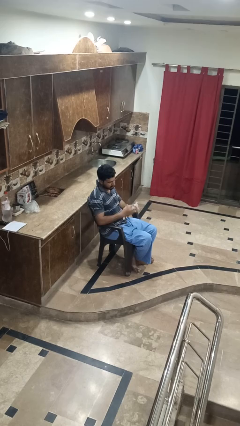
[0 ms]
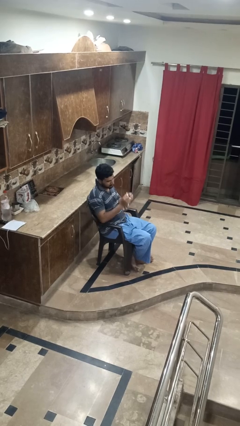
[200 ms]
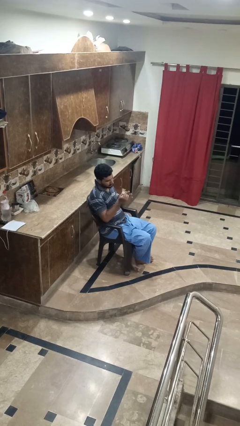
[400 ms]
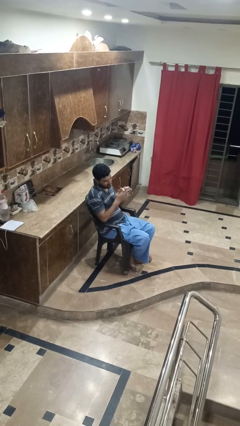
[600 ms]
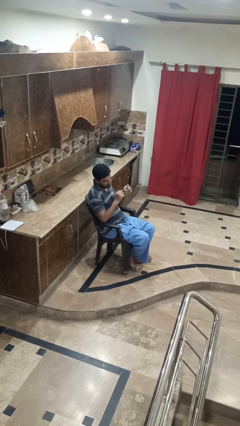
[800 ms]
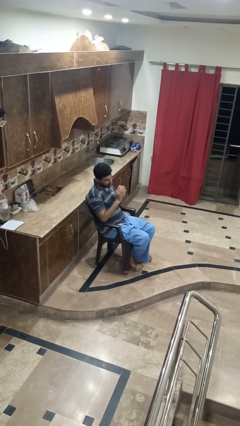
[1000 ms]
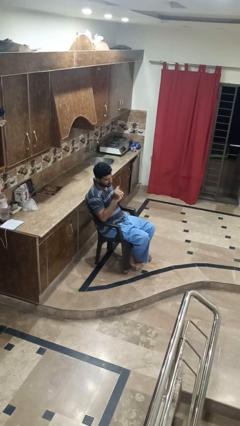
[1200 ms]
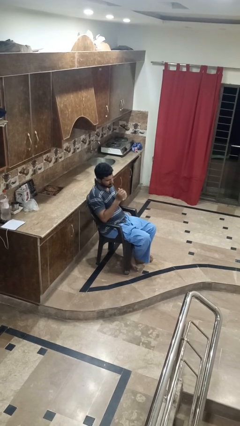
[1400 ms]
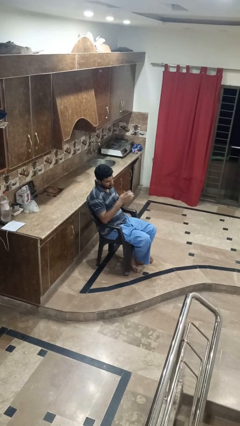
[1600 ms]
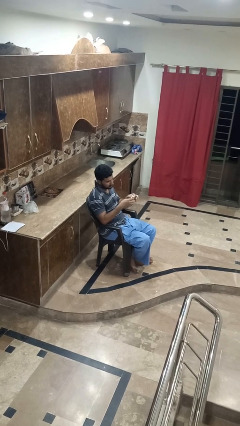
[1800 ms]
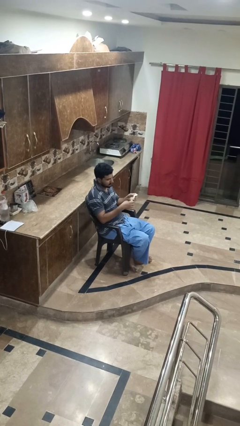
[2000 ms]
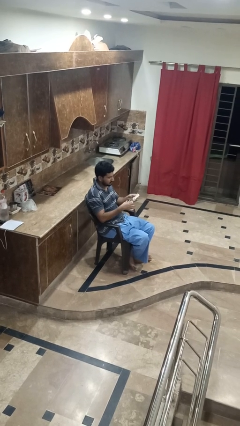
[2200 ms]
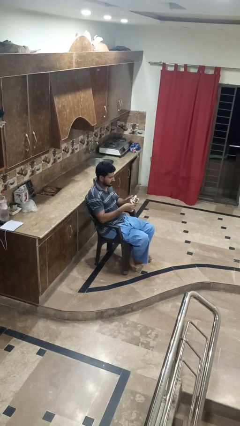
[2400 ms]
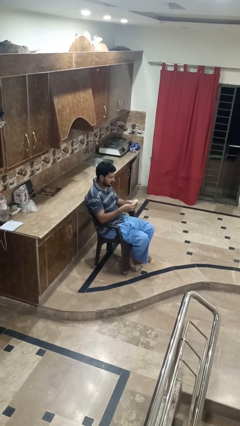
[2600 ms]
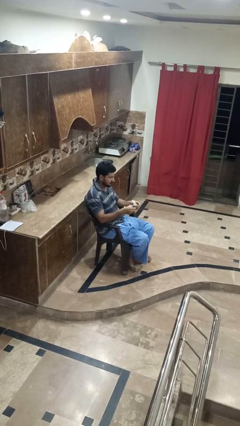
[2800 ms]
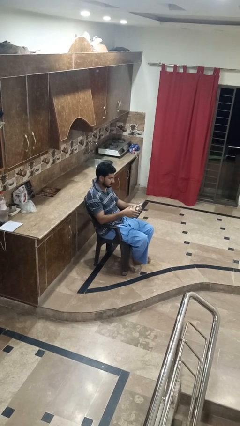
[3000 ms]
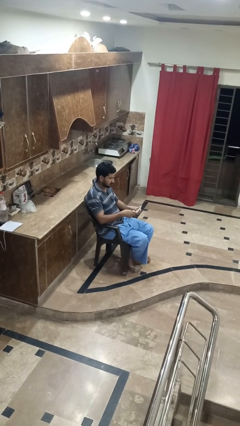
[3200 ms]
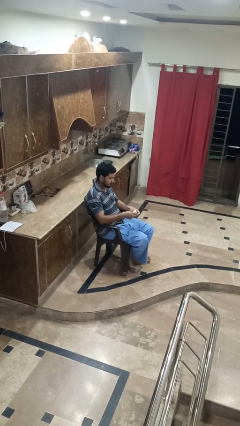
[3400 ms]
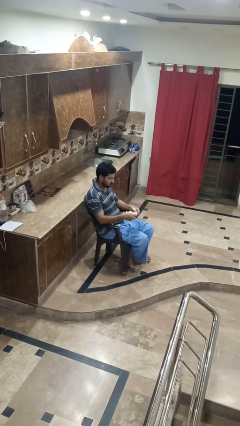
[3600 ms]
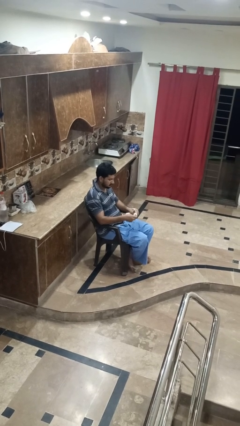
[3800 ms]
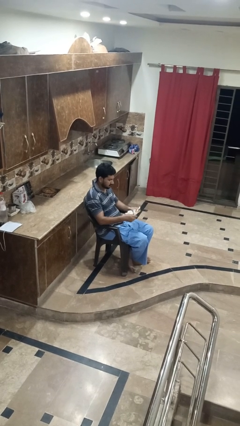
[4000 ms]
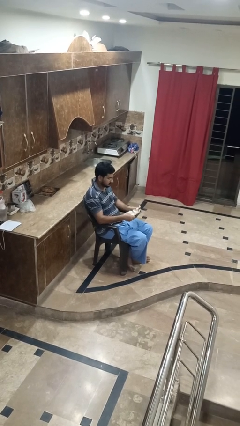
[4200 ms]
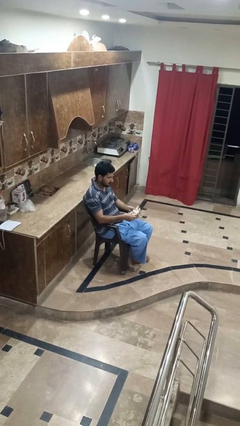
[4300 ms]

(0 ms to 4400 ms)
person crumples paper

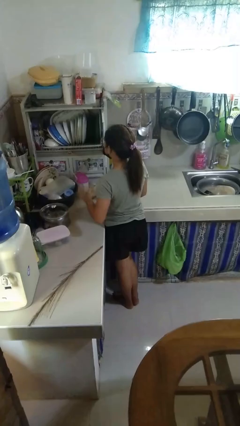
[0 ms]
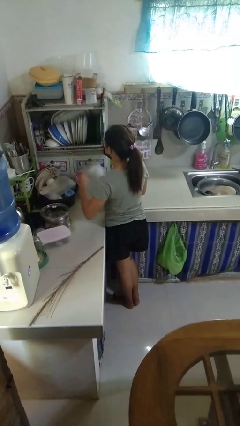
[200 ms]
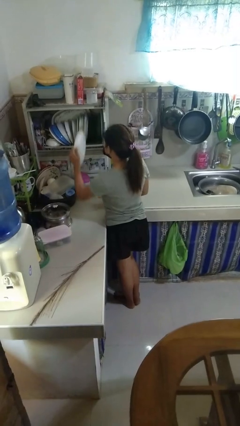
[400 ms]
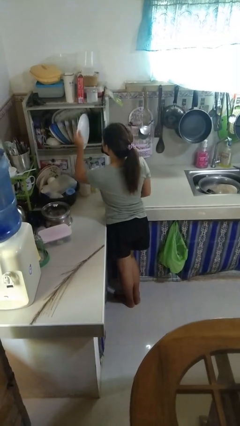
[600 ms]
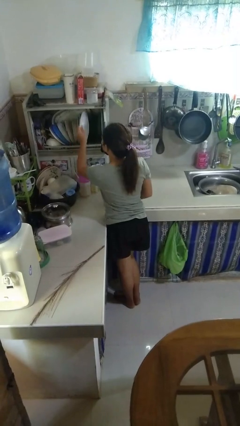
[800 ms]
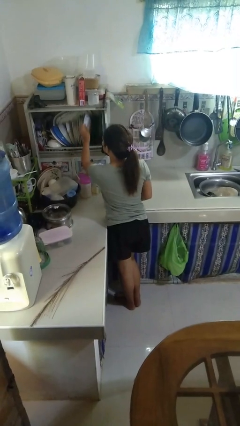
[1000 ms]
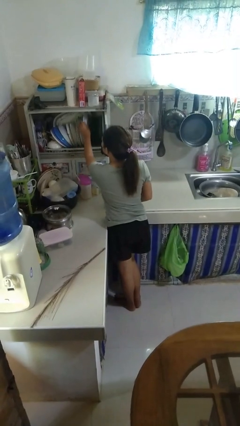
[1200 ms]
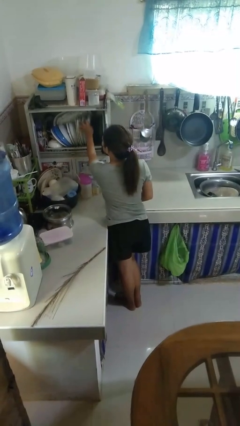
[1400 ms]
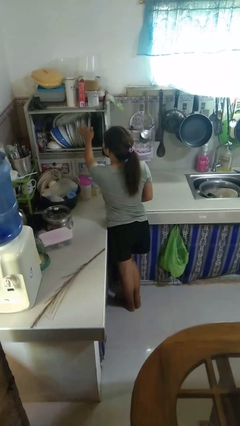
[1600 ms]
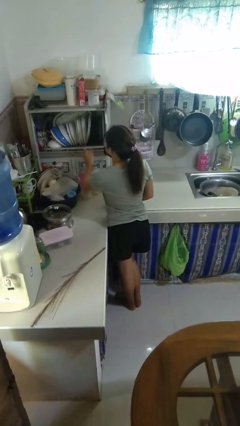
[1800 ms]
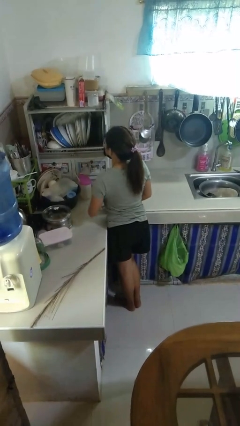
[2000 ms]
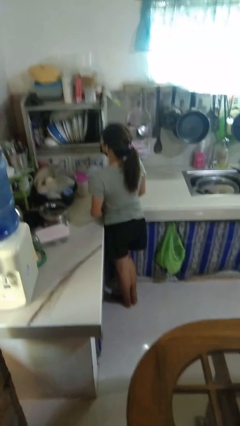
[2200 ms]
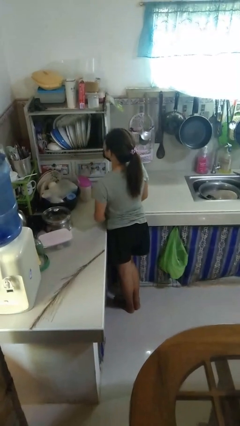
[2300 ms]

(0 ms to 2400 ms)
person puts object into kitchen drawer

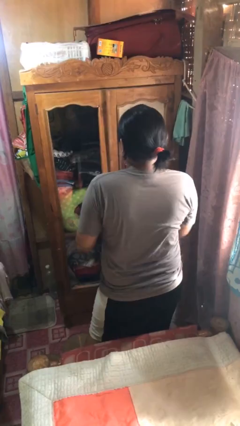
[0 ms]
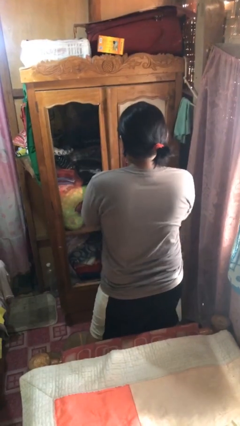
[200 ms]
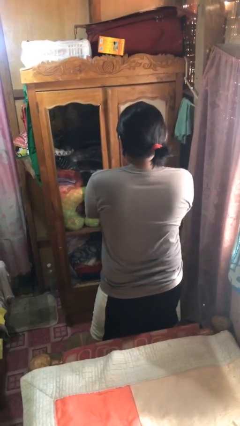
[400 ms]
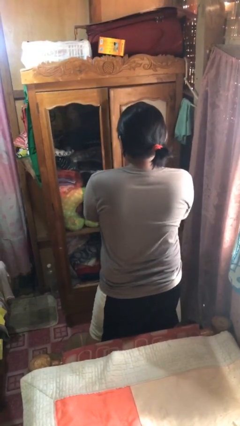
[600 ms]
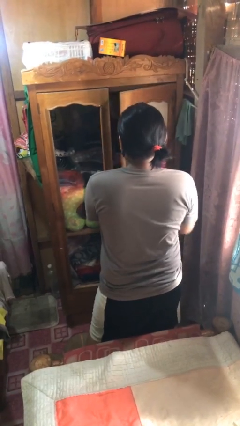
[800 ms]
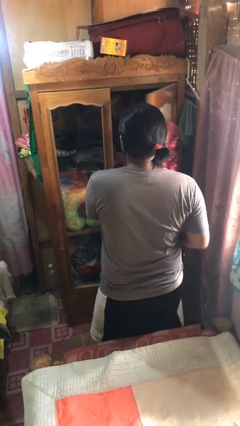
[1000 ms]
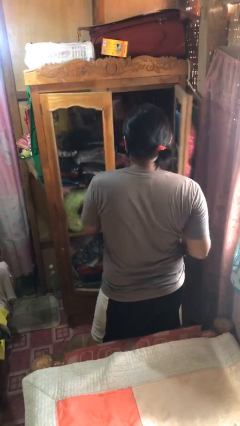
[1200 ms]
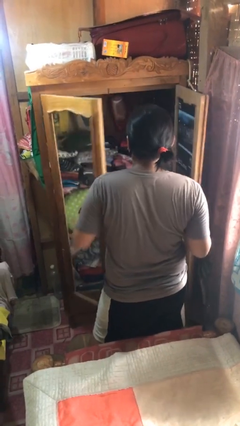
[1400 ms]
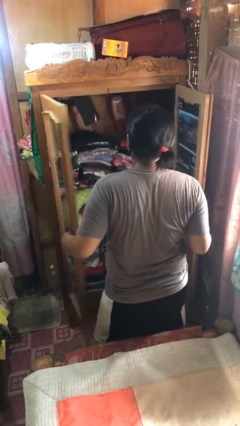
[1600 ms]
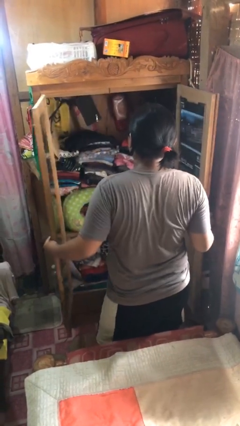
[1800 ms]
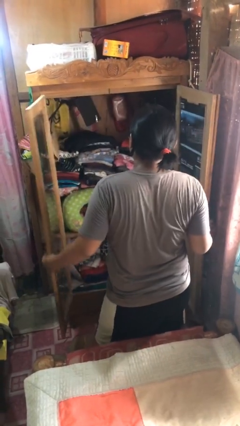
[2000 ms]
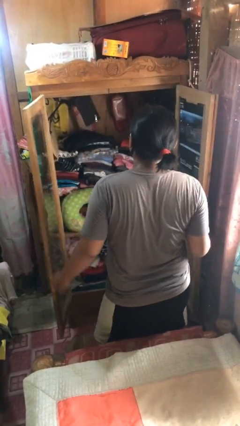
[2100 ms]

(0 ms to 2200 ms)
person opens closet door

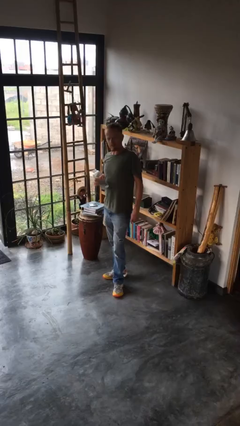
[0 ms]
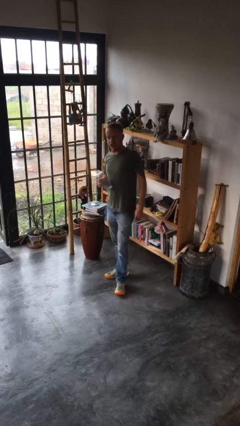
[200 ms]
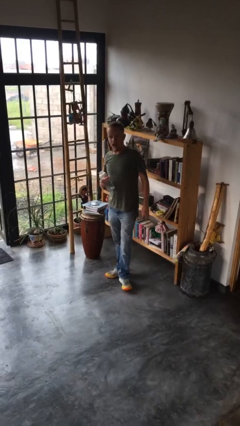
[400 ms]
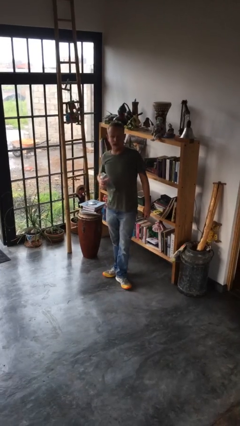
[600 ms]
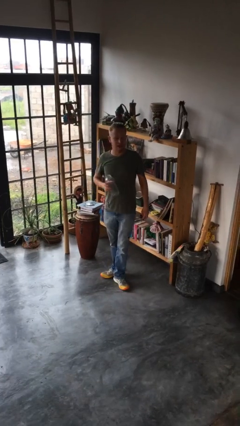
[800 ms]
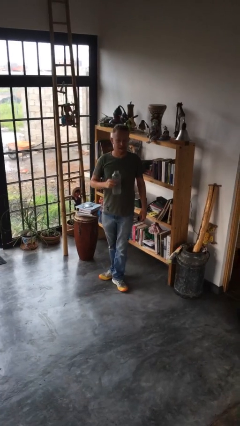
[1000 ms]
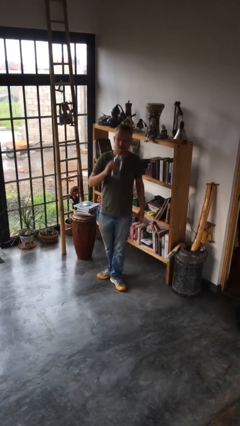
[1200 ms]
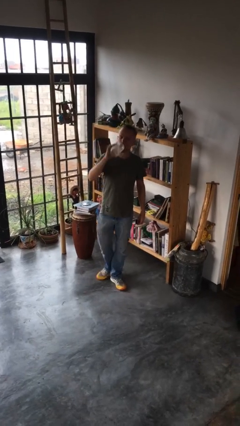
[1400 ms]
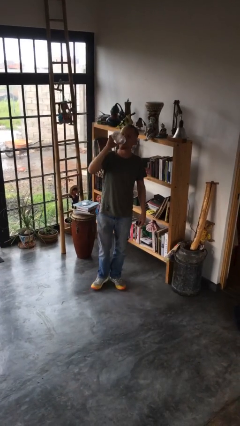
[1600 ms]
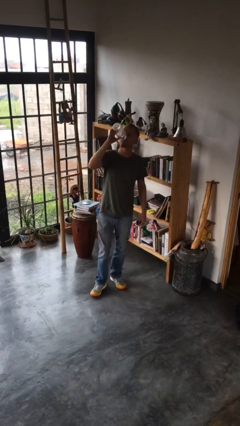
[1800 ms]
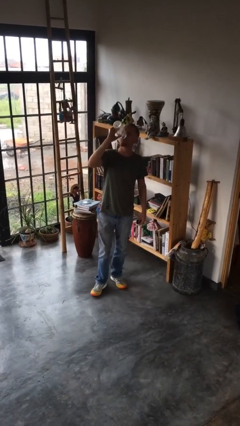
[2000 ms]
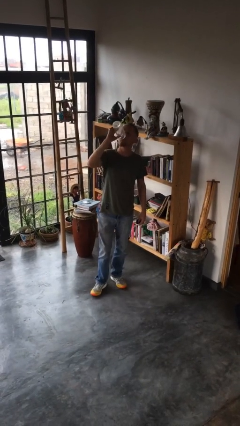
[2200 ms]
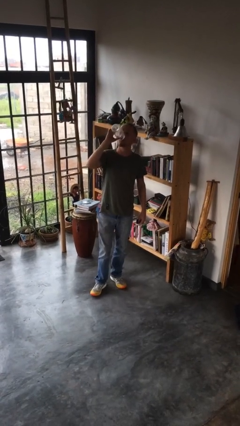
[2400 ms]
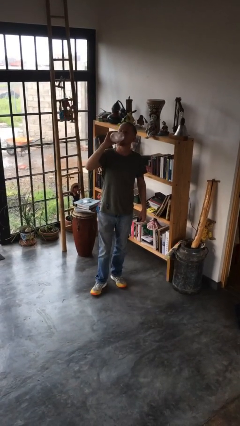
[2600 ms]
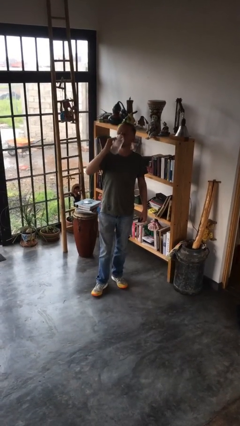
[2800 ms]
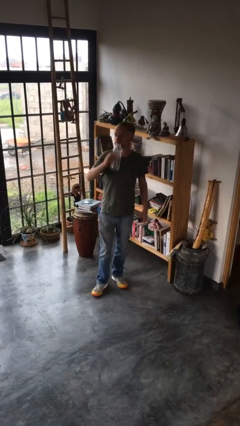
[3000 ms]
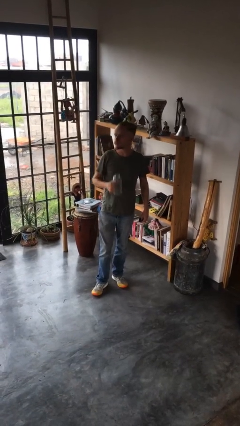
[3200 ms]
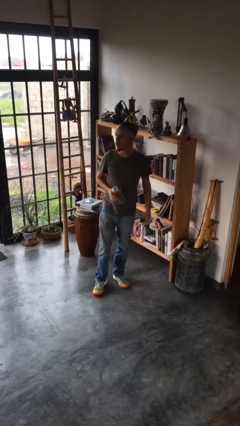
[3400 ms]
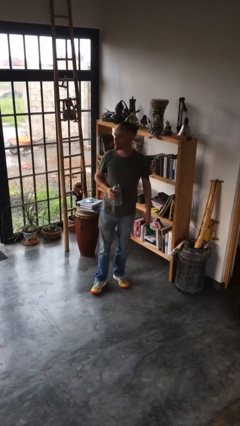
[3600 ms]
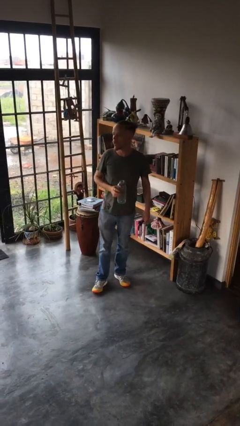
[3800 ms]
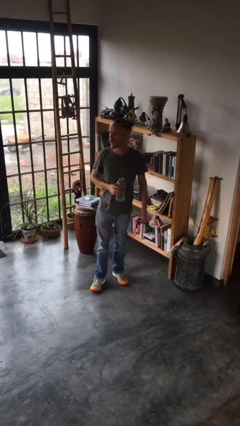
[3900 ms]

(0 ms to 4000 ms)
person drinks from bottle

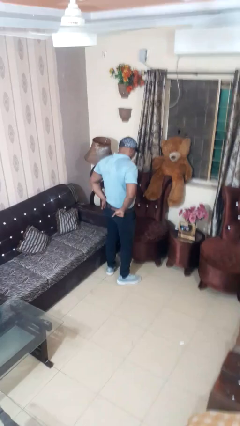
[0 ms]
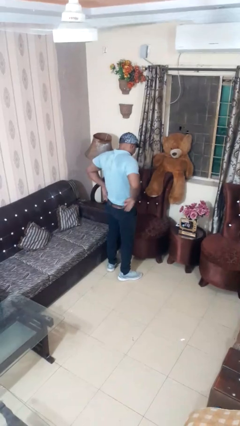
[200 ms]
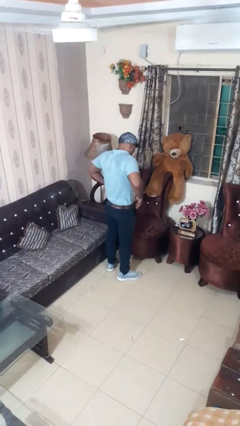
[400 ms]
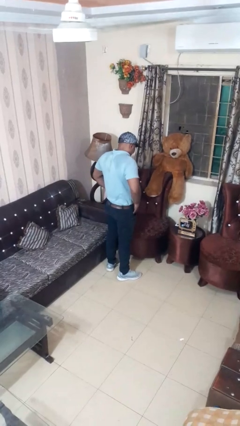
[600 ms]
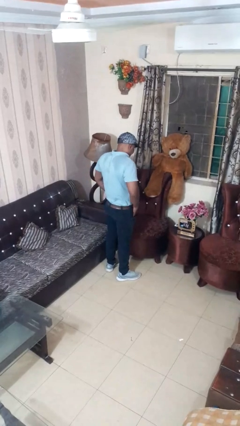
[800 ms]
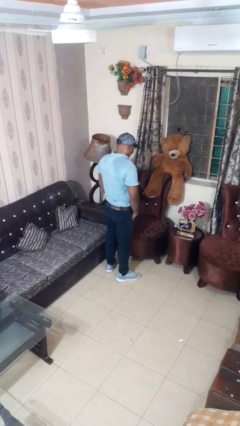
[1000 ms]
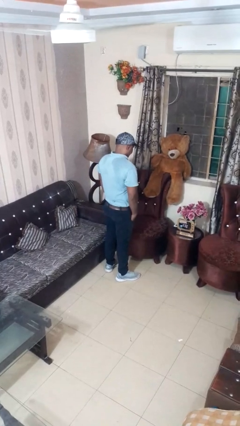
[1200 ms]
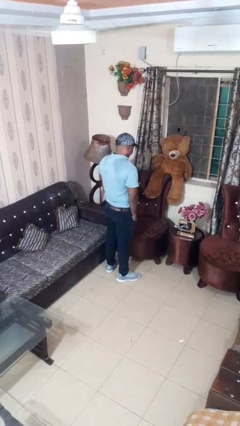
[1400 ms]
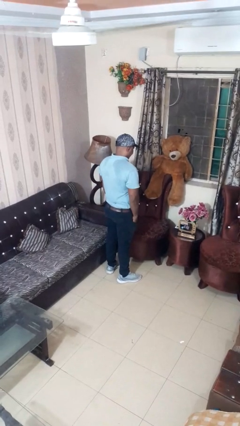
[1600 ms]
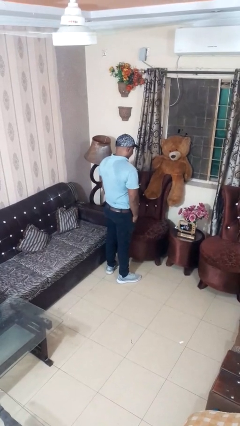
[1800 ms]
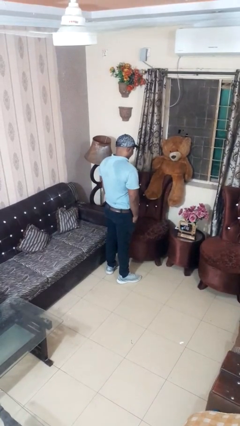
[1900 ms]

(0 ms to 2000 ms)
person puts hands in back pockets

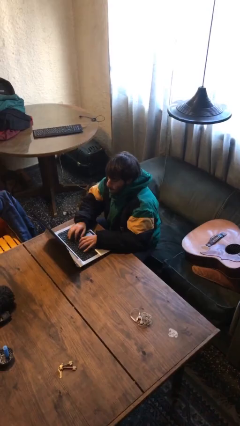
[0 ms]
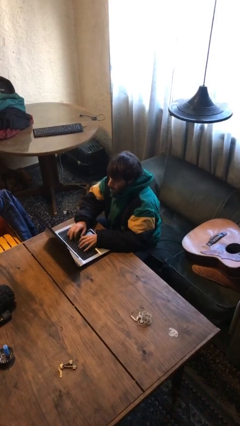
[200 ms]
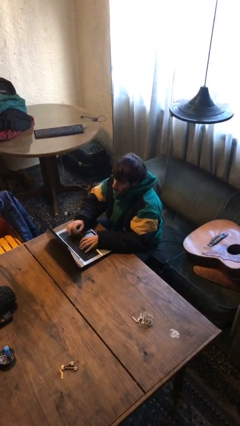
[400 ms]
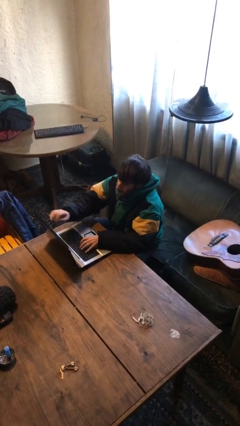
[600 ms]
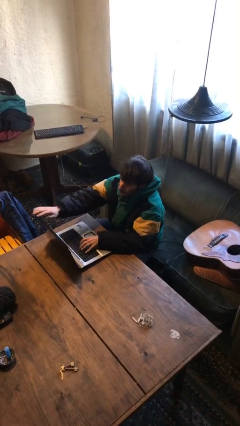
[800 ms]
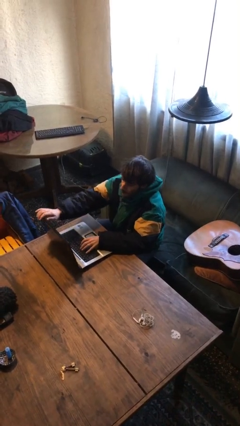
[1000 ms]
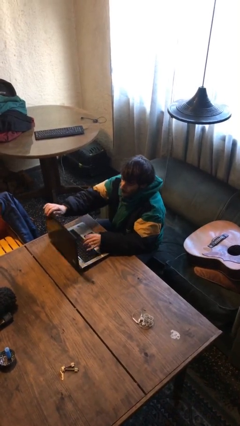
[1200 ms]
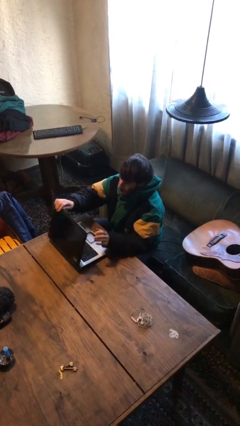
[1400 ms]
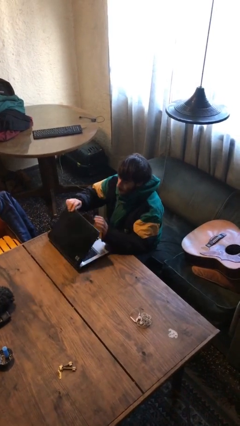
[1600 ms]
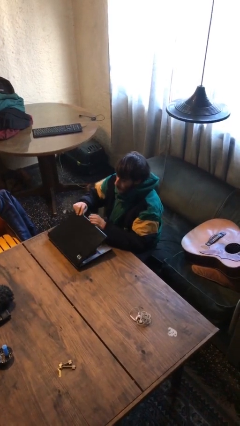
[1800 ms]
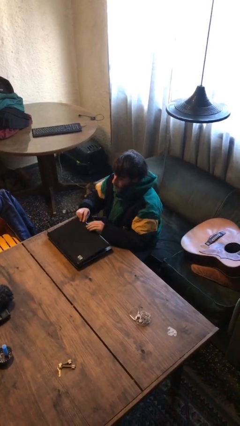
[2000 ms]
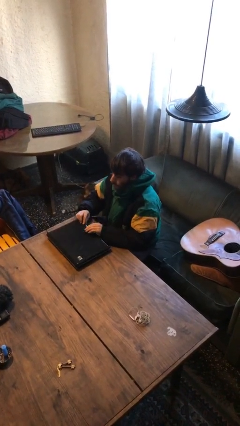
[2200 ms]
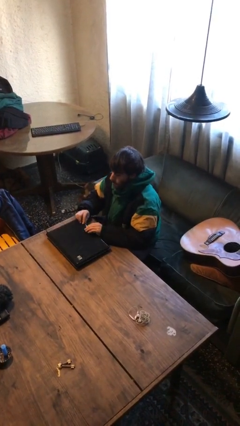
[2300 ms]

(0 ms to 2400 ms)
person closes laptop
